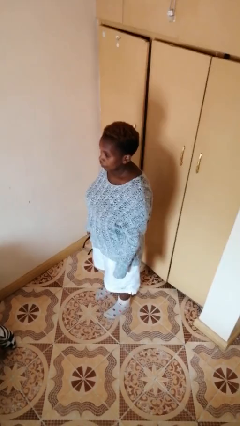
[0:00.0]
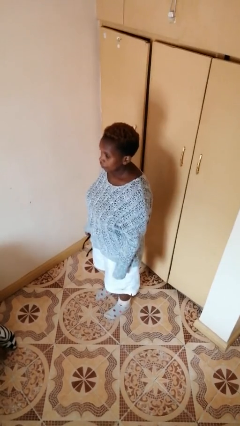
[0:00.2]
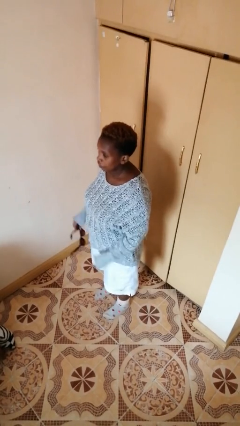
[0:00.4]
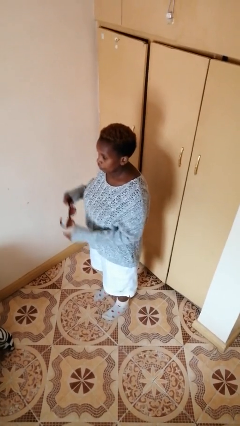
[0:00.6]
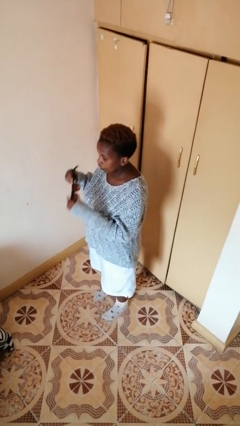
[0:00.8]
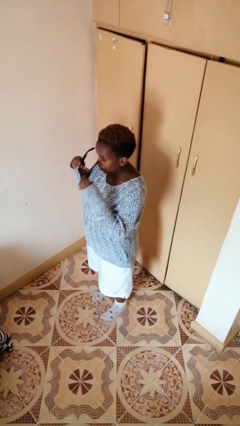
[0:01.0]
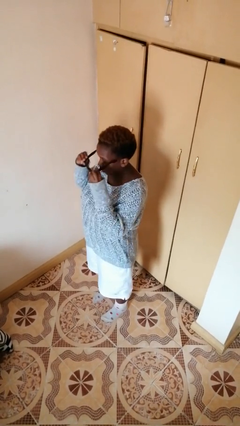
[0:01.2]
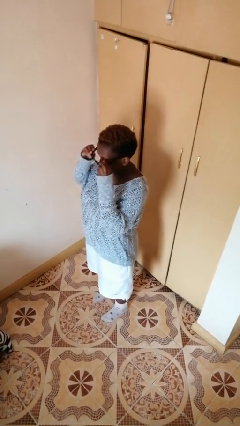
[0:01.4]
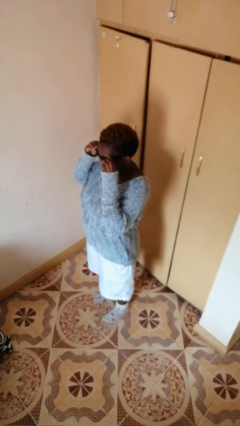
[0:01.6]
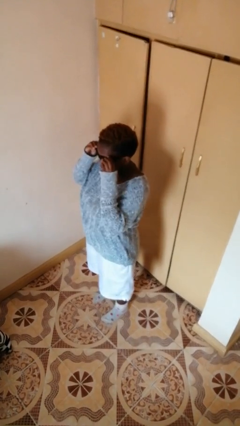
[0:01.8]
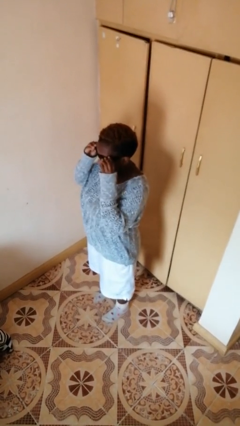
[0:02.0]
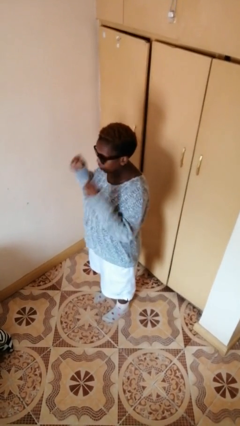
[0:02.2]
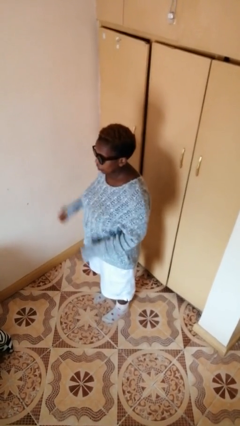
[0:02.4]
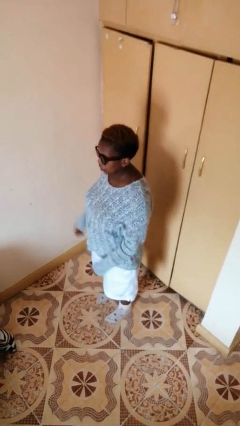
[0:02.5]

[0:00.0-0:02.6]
person puts on sunglasses

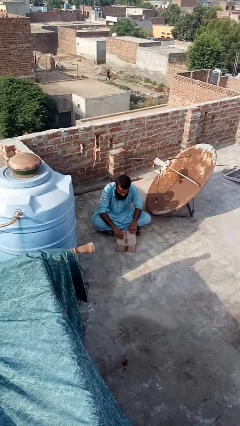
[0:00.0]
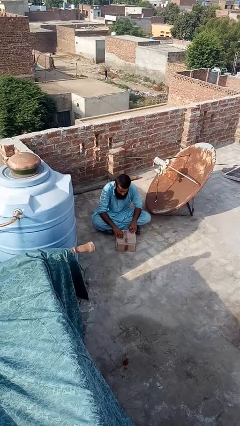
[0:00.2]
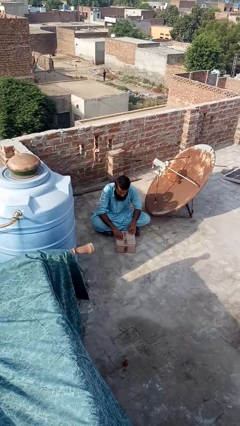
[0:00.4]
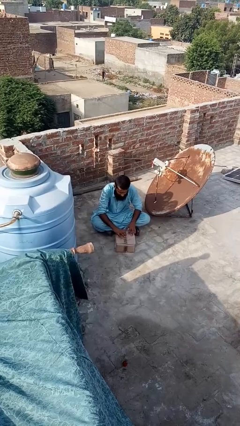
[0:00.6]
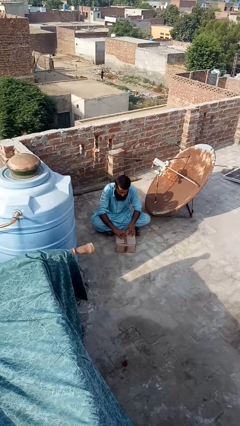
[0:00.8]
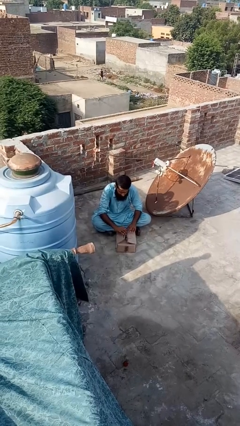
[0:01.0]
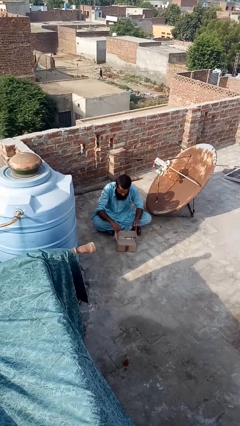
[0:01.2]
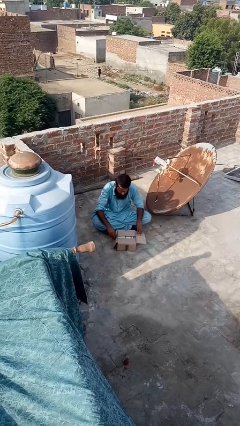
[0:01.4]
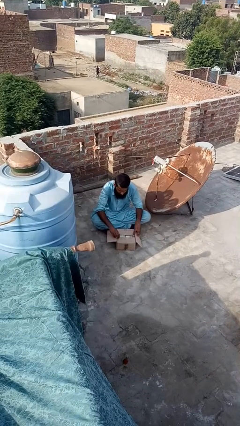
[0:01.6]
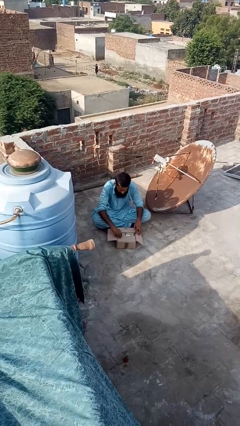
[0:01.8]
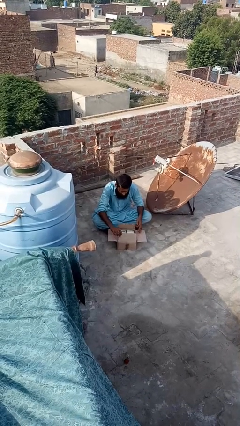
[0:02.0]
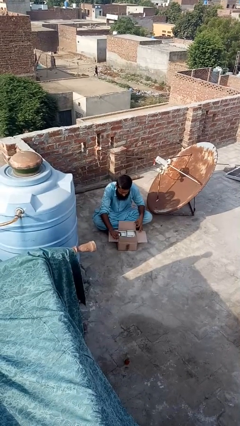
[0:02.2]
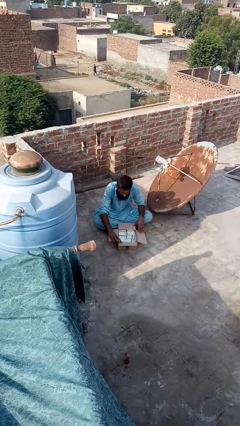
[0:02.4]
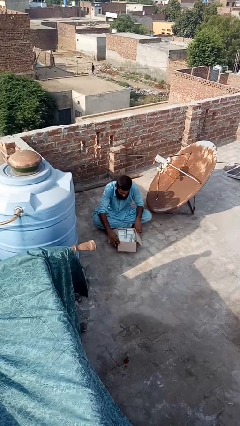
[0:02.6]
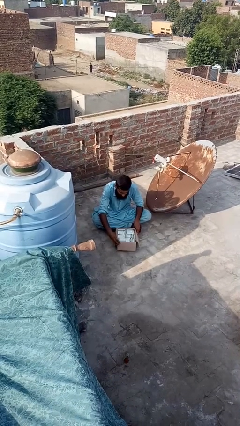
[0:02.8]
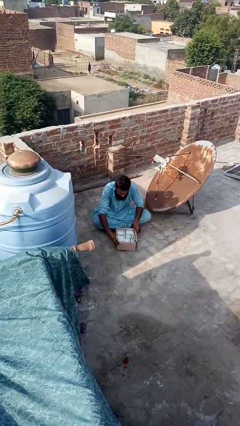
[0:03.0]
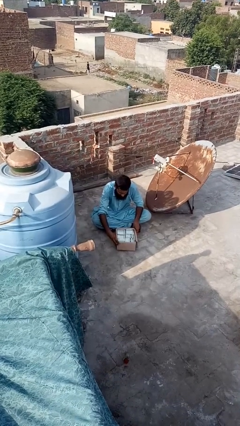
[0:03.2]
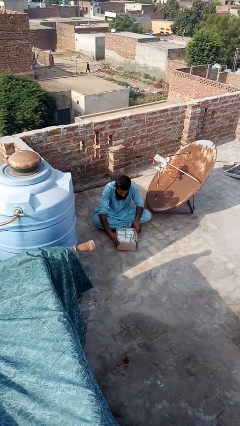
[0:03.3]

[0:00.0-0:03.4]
person opens box

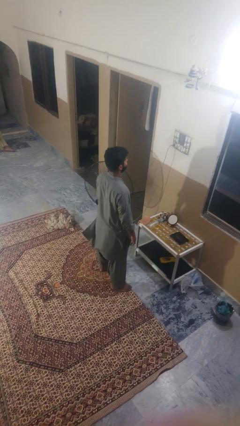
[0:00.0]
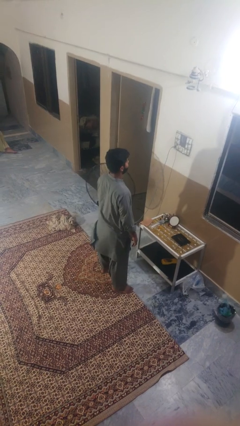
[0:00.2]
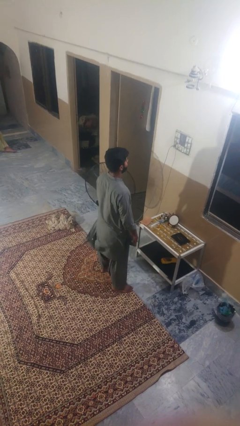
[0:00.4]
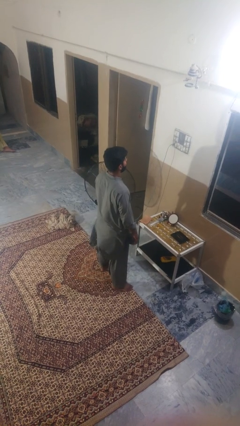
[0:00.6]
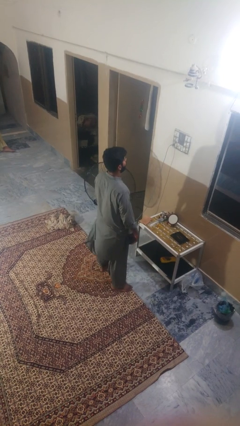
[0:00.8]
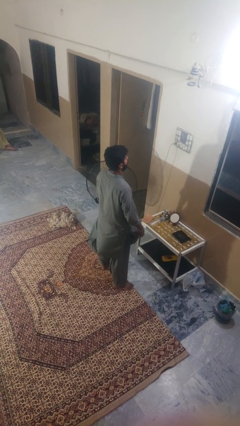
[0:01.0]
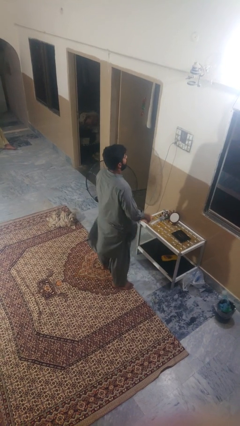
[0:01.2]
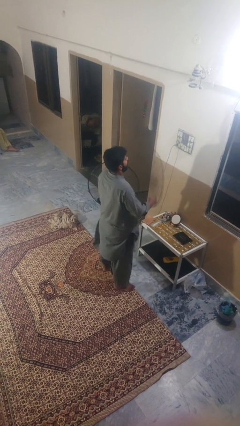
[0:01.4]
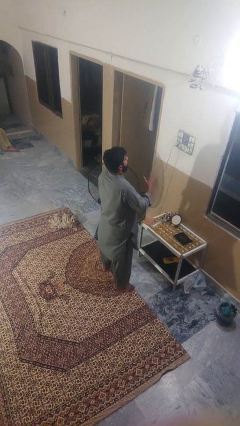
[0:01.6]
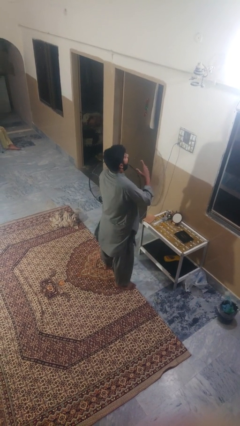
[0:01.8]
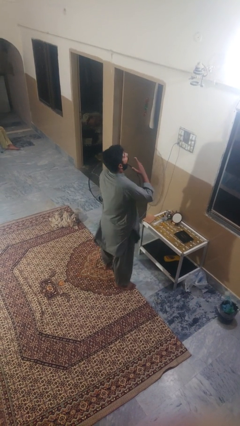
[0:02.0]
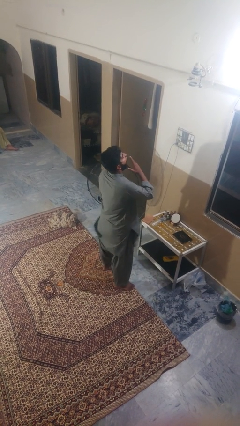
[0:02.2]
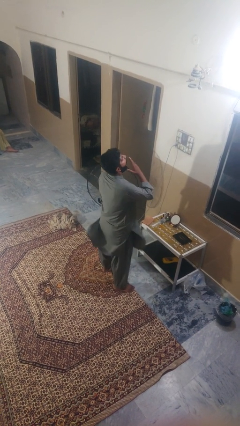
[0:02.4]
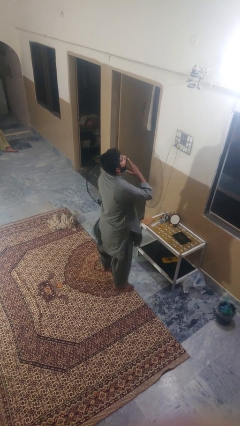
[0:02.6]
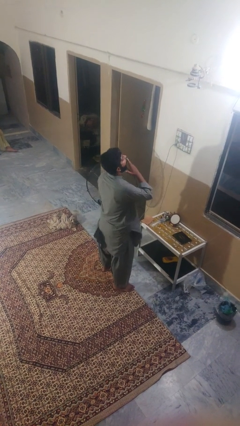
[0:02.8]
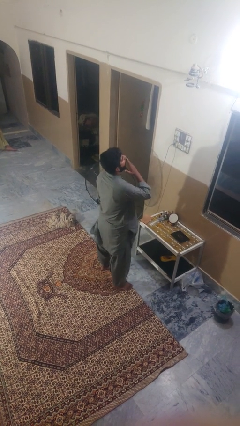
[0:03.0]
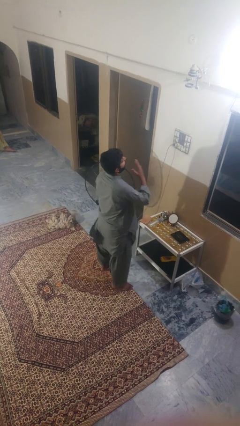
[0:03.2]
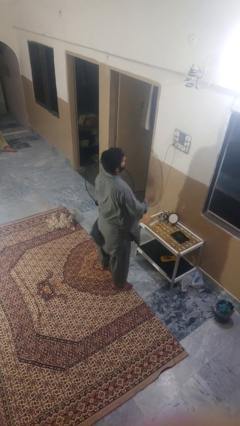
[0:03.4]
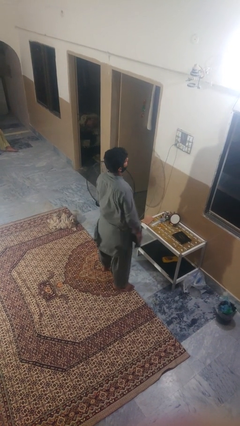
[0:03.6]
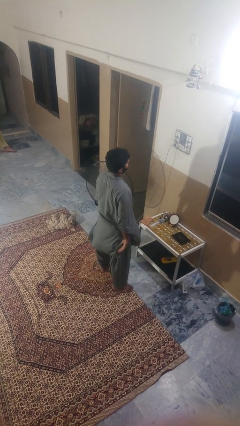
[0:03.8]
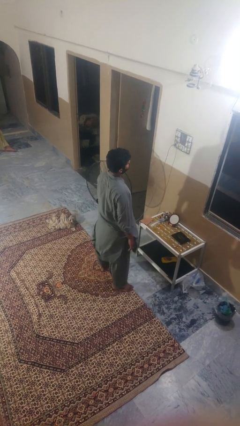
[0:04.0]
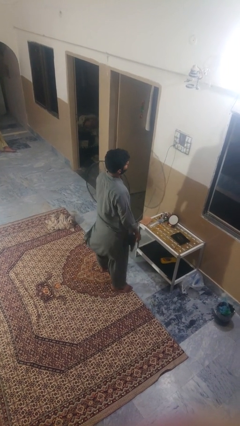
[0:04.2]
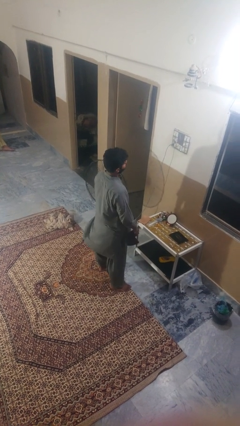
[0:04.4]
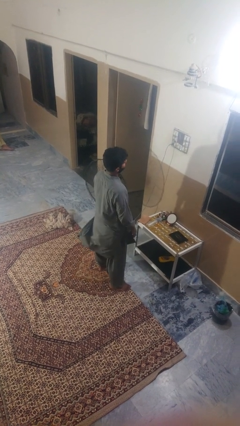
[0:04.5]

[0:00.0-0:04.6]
person yawns

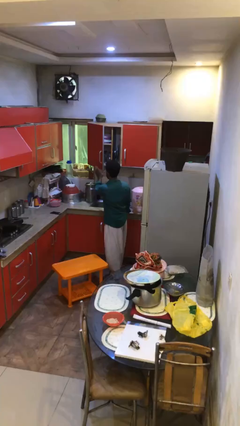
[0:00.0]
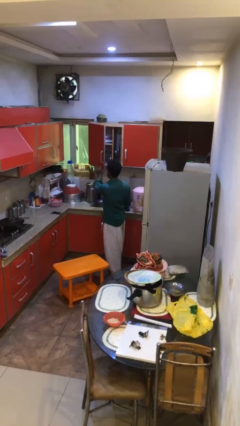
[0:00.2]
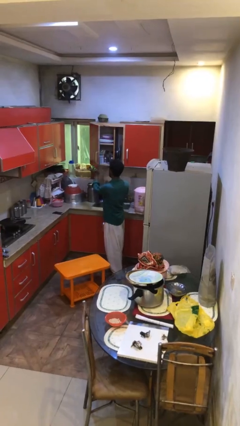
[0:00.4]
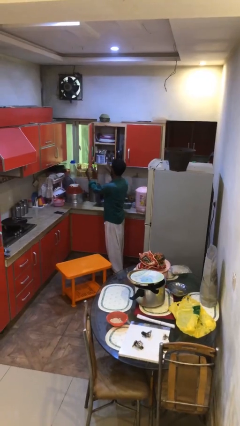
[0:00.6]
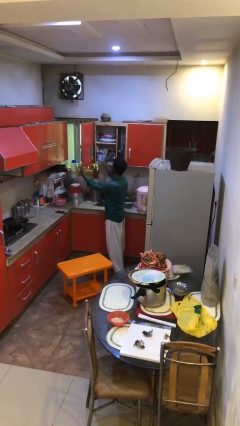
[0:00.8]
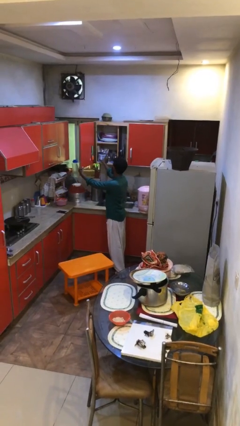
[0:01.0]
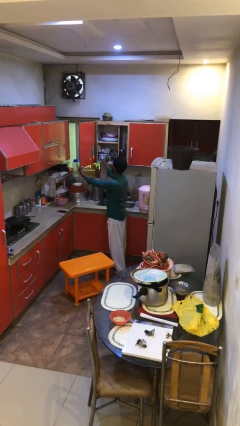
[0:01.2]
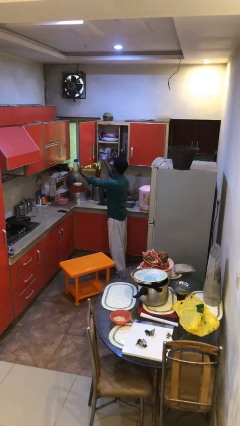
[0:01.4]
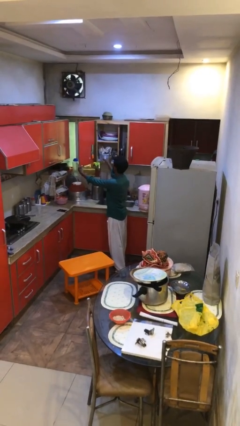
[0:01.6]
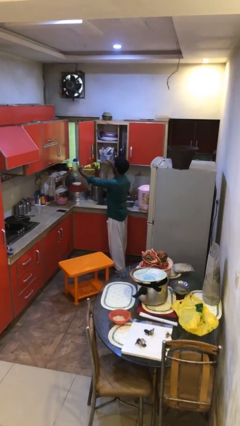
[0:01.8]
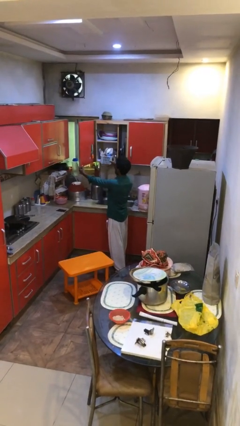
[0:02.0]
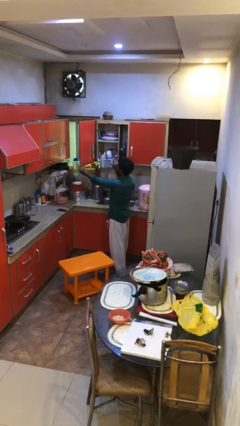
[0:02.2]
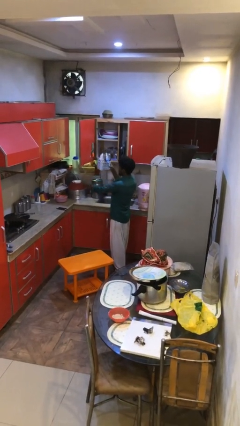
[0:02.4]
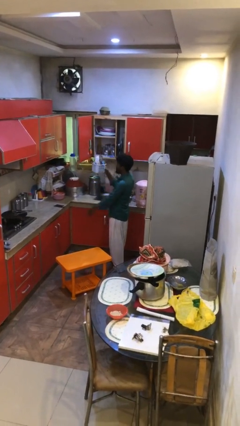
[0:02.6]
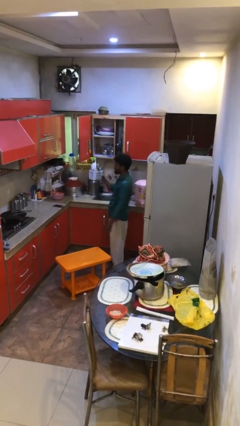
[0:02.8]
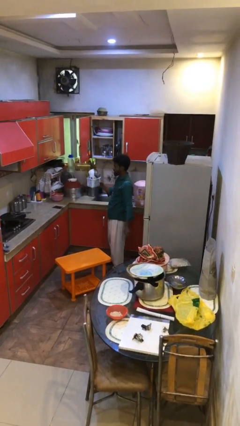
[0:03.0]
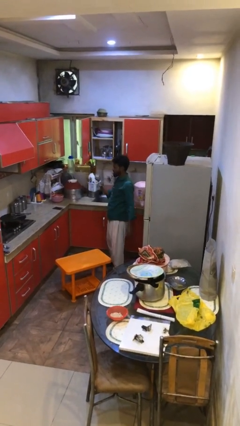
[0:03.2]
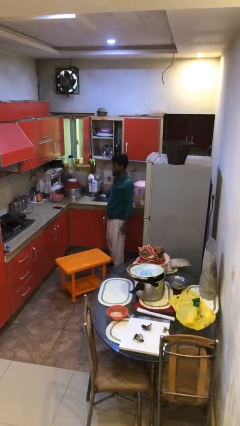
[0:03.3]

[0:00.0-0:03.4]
person picks up object from shelf

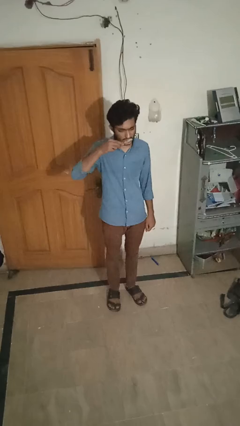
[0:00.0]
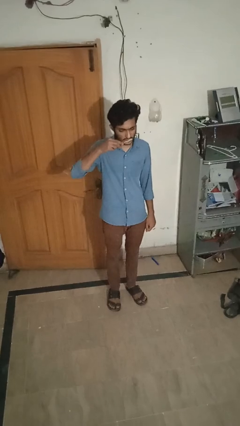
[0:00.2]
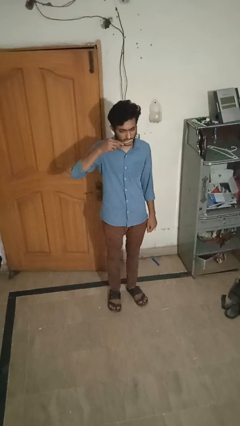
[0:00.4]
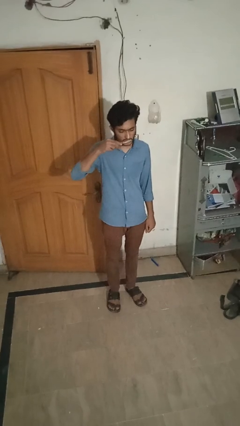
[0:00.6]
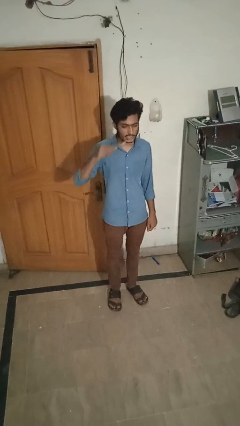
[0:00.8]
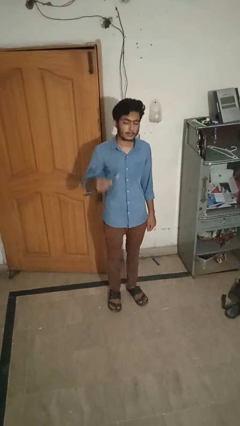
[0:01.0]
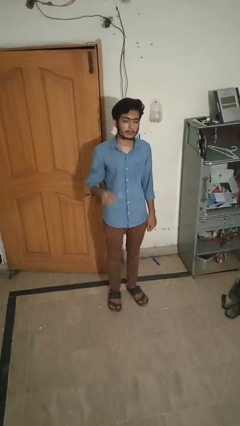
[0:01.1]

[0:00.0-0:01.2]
person brushes teeth

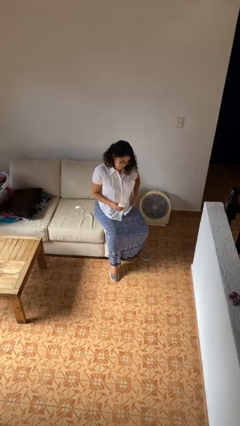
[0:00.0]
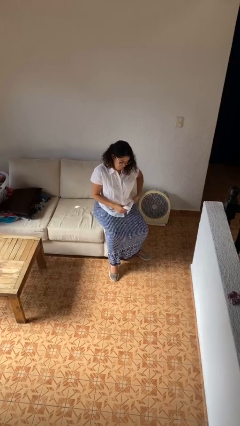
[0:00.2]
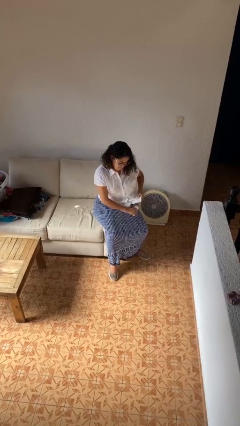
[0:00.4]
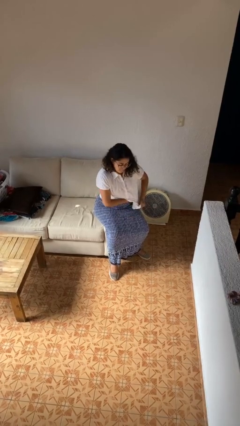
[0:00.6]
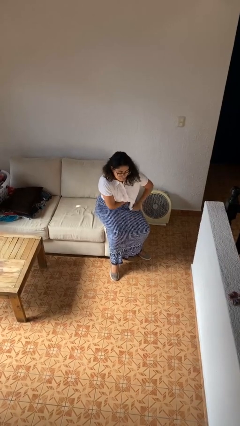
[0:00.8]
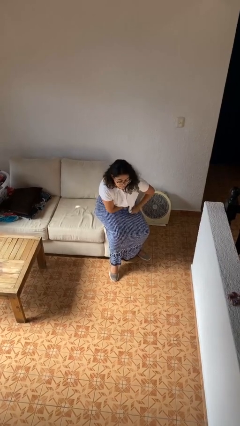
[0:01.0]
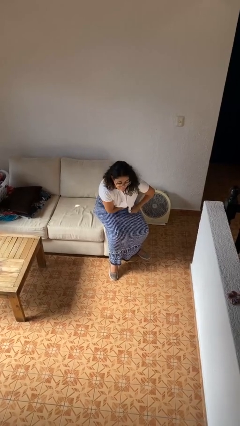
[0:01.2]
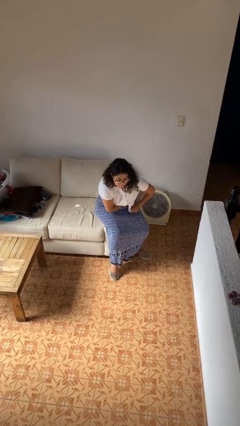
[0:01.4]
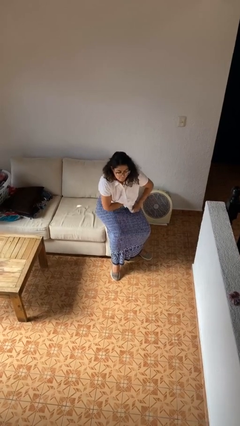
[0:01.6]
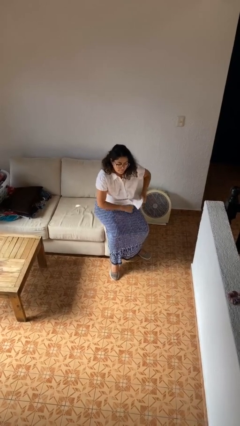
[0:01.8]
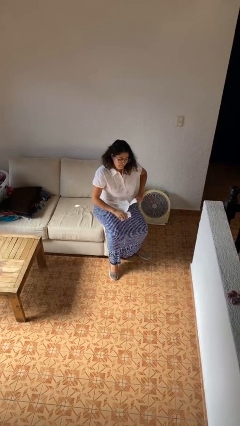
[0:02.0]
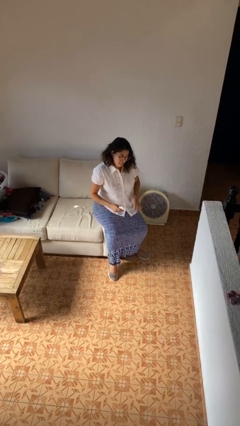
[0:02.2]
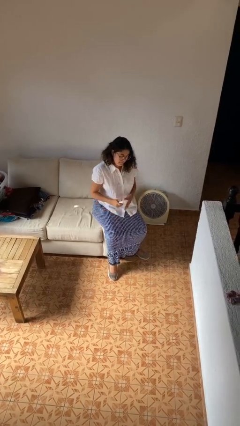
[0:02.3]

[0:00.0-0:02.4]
person applies deodorant
